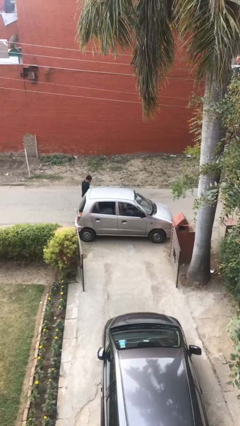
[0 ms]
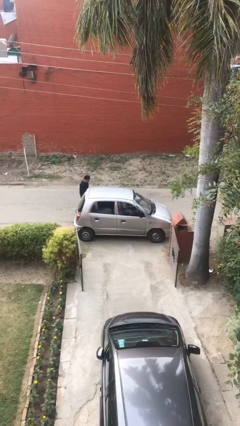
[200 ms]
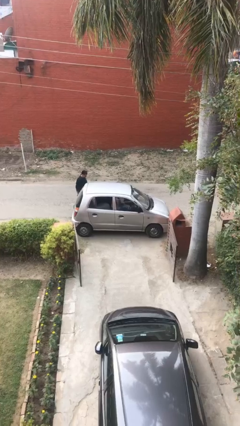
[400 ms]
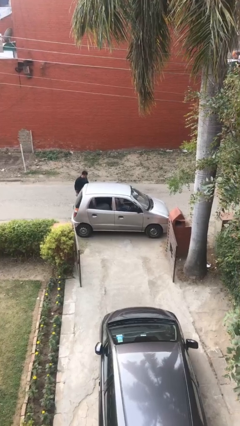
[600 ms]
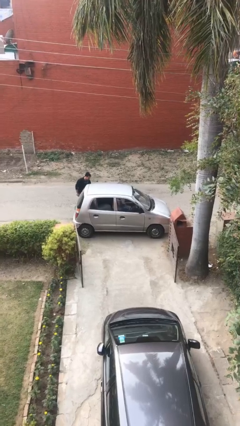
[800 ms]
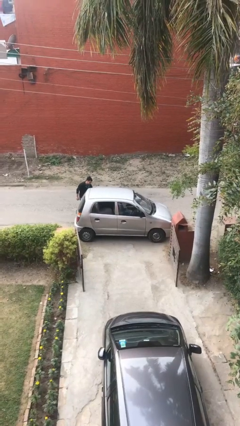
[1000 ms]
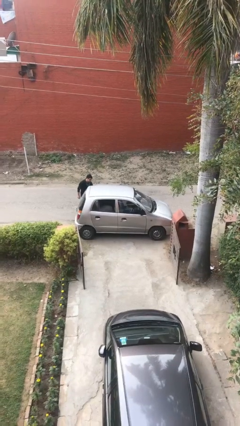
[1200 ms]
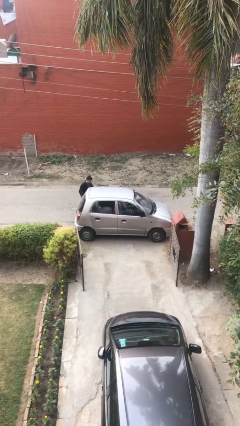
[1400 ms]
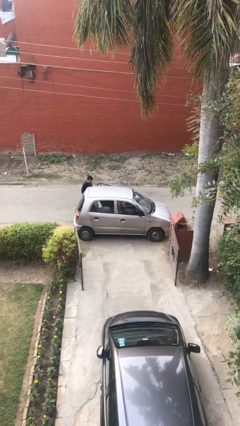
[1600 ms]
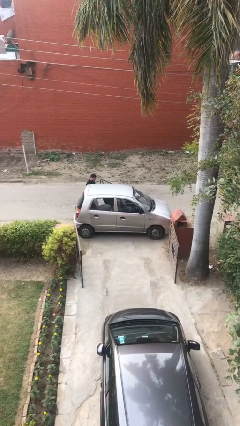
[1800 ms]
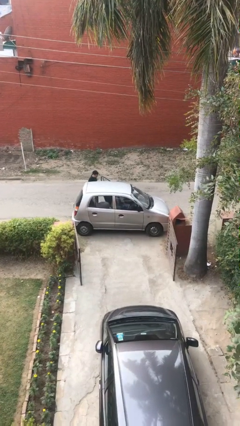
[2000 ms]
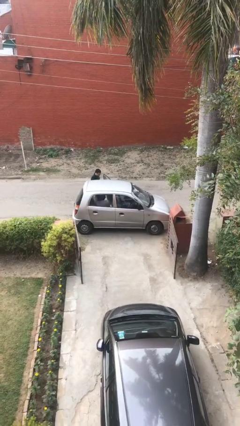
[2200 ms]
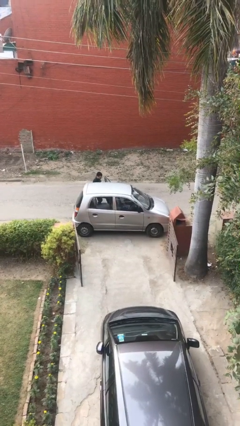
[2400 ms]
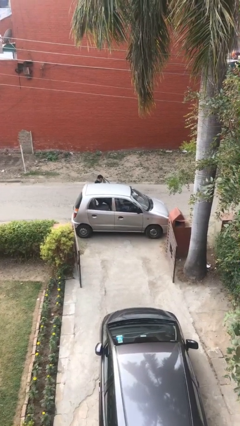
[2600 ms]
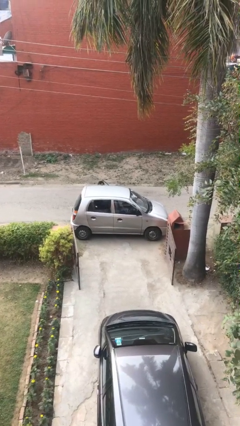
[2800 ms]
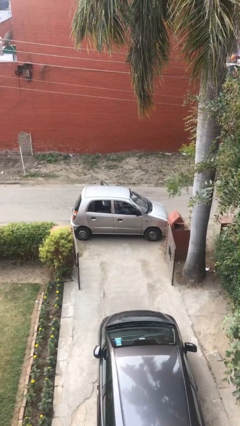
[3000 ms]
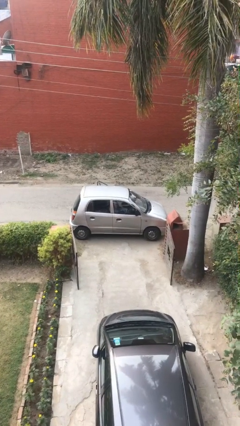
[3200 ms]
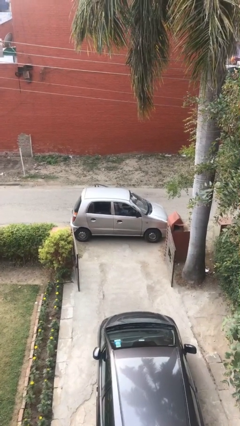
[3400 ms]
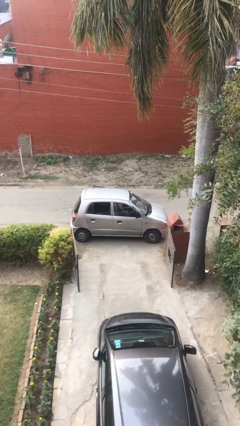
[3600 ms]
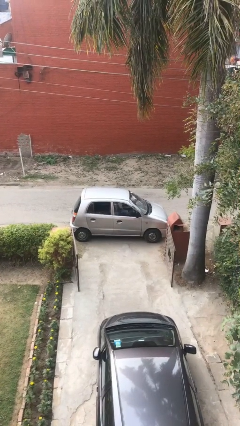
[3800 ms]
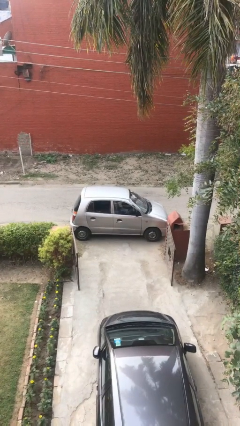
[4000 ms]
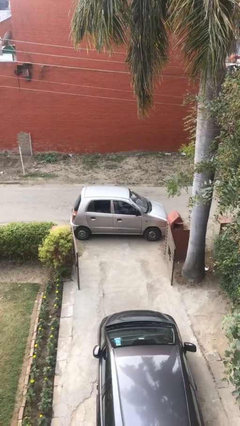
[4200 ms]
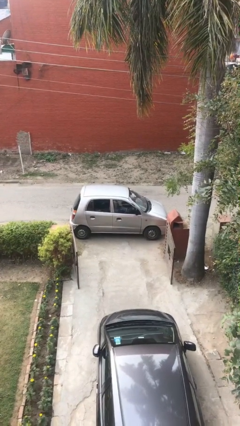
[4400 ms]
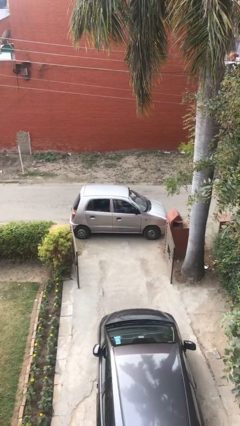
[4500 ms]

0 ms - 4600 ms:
car picks up person

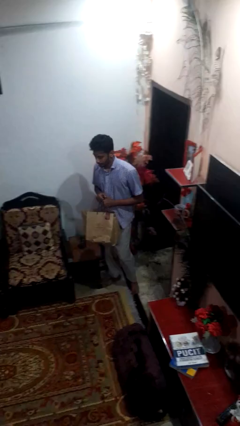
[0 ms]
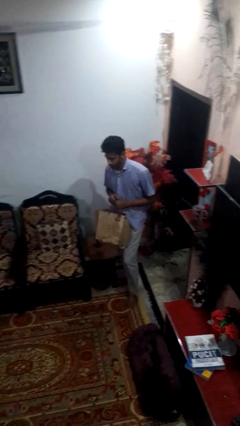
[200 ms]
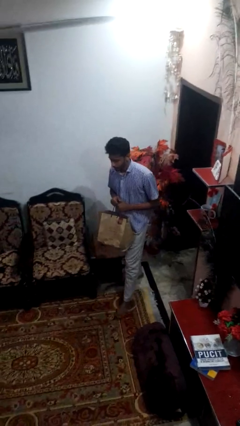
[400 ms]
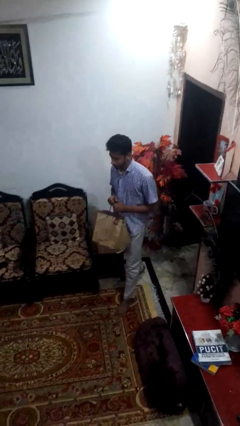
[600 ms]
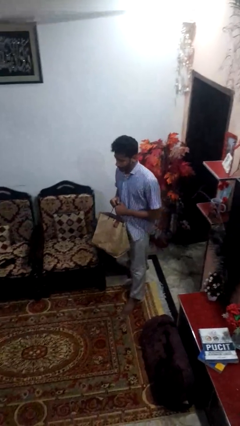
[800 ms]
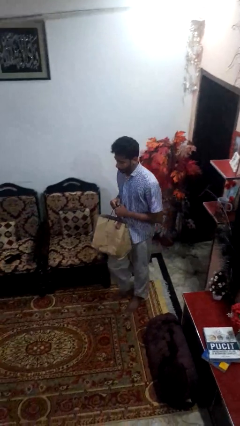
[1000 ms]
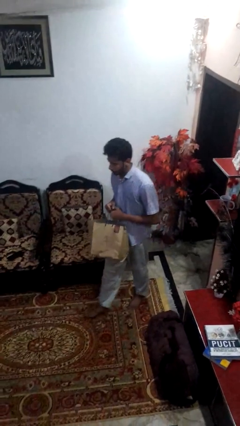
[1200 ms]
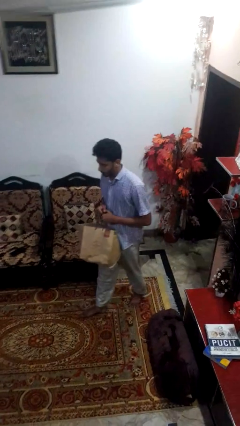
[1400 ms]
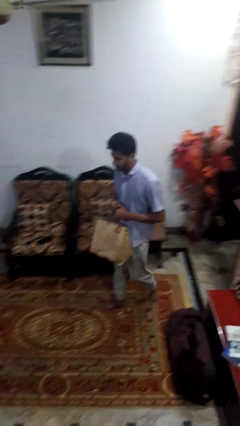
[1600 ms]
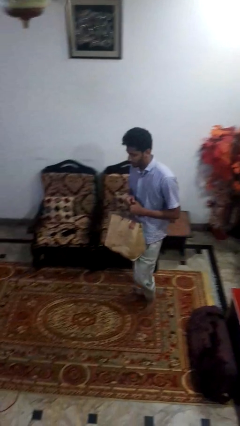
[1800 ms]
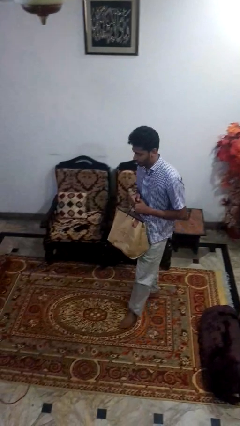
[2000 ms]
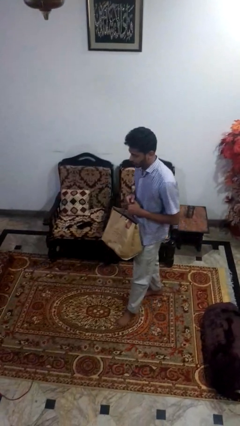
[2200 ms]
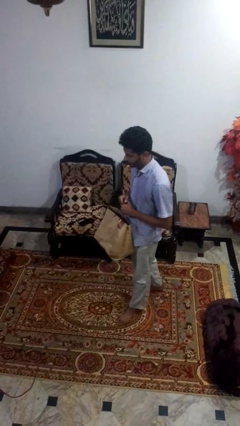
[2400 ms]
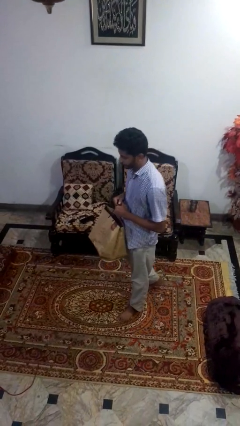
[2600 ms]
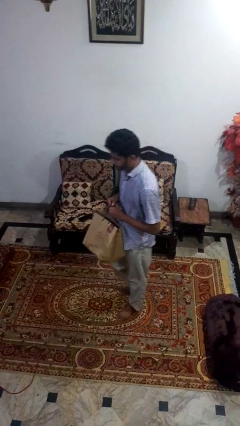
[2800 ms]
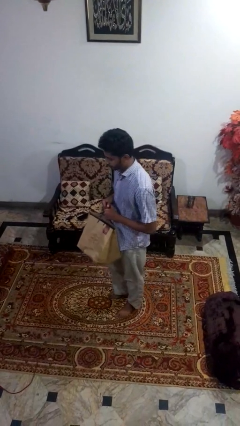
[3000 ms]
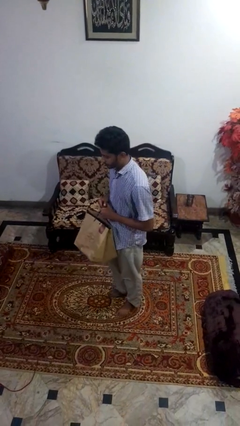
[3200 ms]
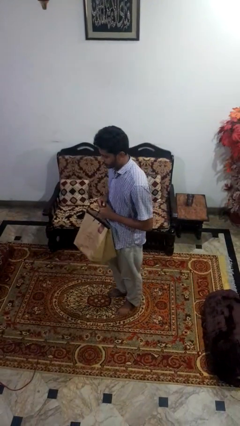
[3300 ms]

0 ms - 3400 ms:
person carries groceries

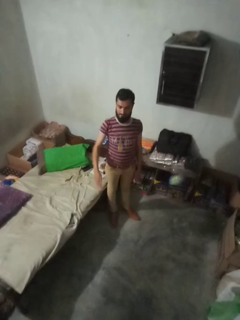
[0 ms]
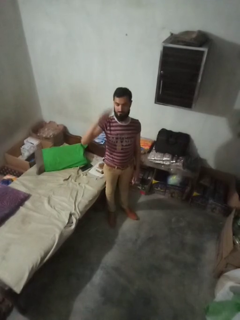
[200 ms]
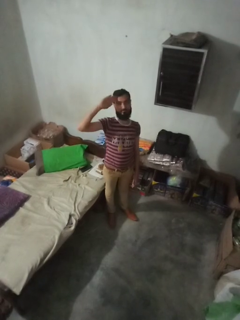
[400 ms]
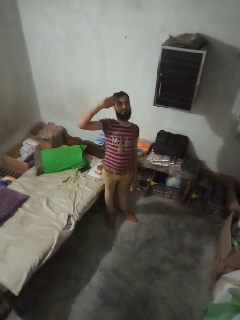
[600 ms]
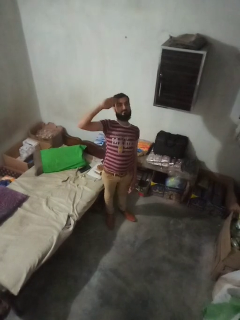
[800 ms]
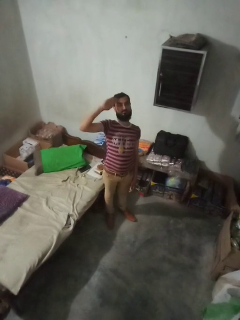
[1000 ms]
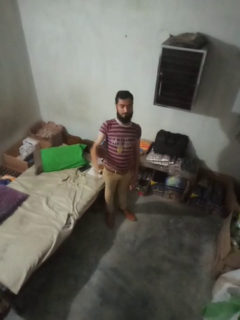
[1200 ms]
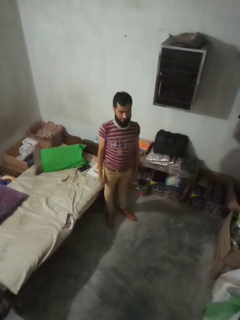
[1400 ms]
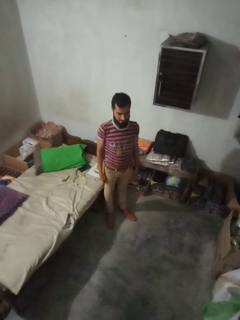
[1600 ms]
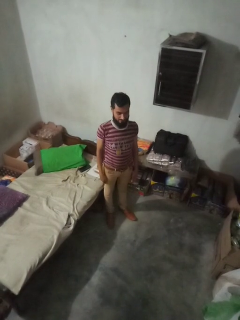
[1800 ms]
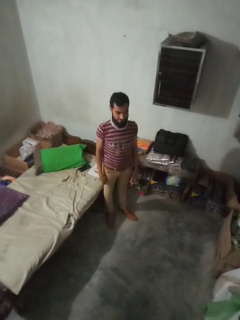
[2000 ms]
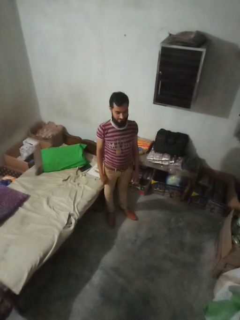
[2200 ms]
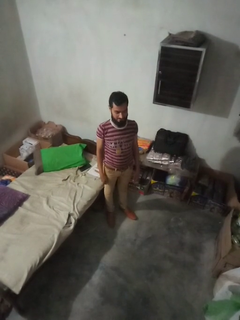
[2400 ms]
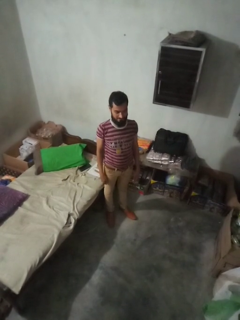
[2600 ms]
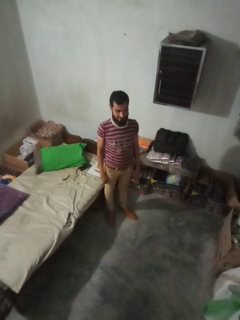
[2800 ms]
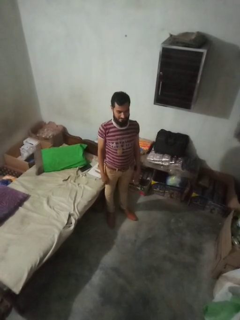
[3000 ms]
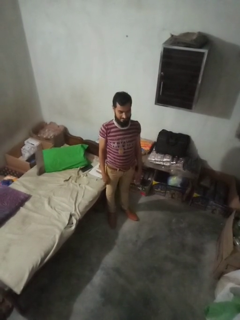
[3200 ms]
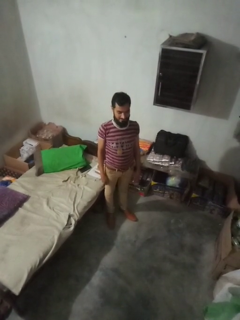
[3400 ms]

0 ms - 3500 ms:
person salutes

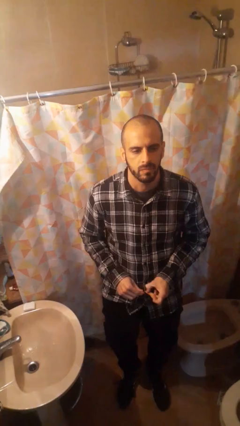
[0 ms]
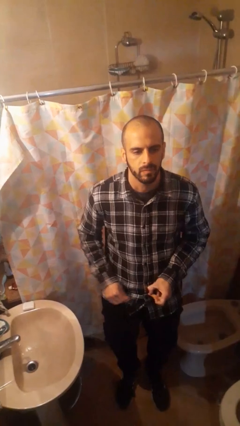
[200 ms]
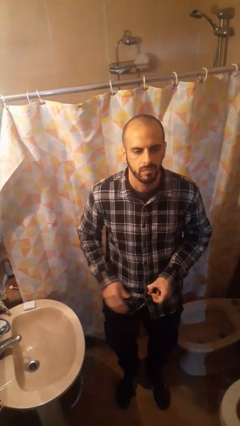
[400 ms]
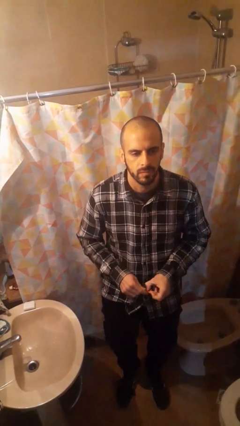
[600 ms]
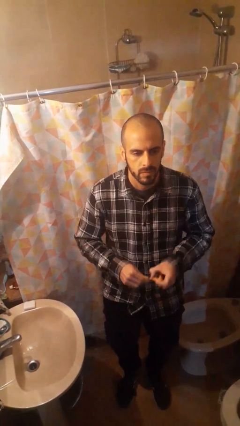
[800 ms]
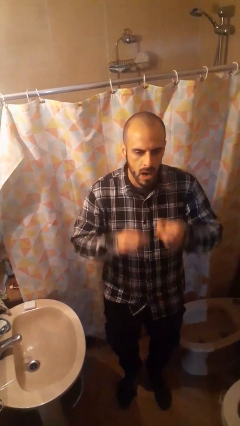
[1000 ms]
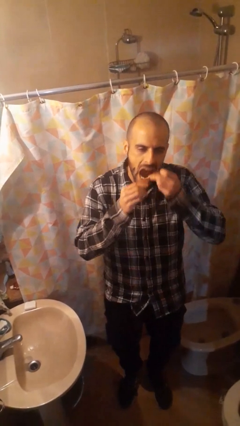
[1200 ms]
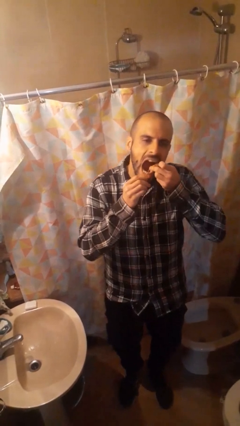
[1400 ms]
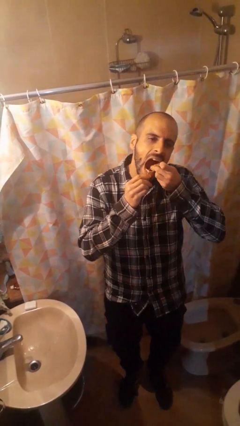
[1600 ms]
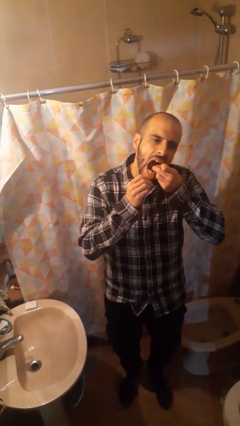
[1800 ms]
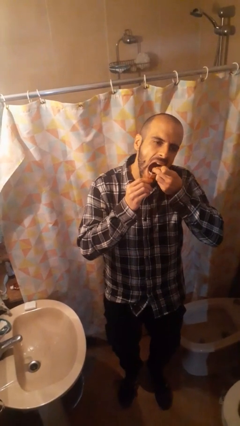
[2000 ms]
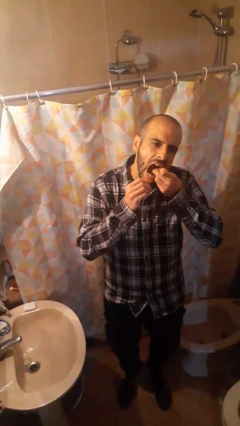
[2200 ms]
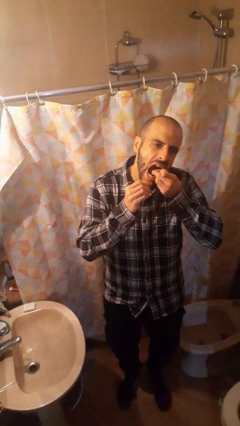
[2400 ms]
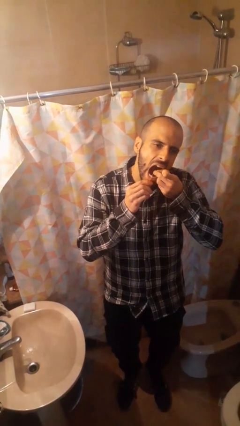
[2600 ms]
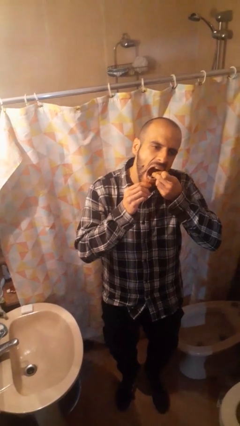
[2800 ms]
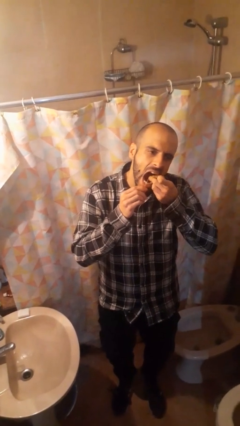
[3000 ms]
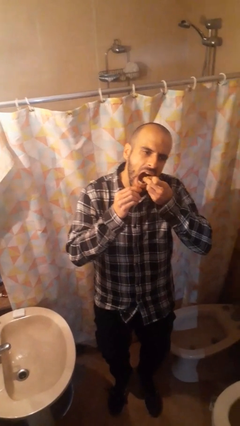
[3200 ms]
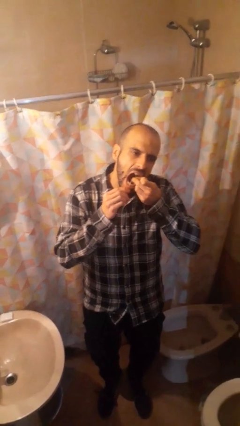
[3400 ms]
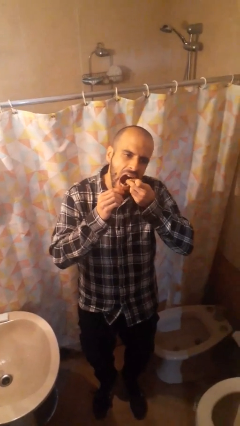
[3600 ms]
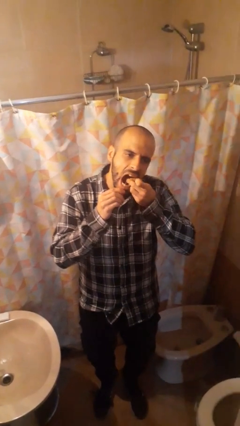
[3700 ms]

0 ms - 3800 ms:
person flosses

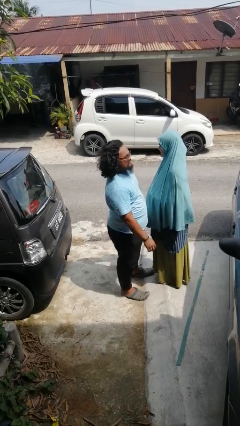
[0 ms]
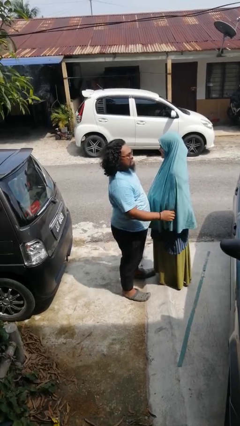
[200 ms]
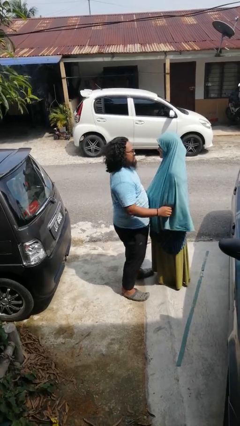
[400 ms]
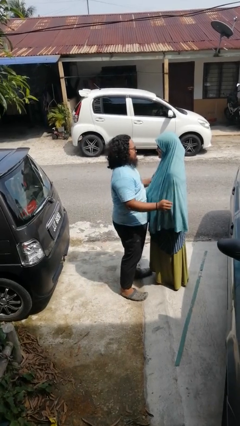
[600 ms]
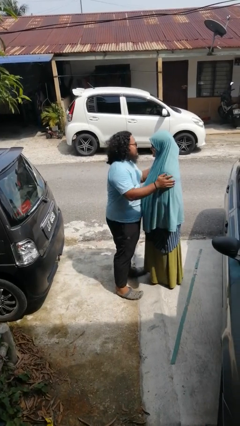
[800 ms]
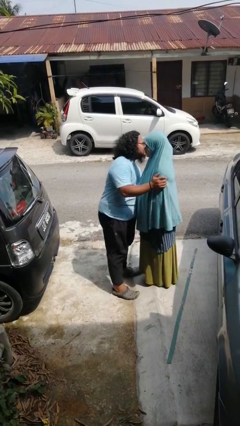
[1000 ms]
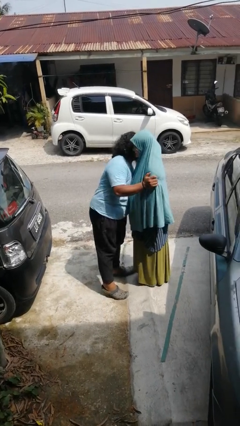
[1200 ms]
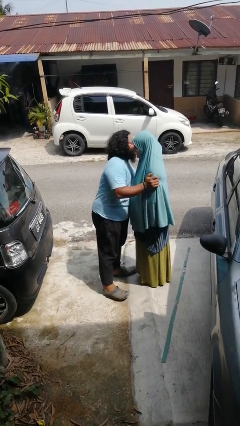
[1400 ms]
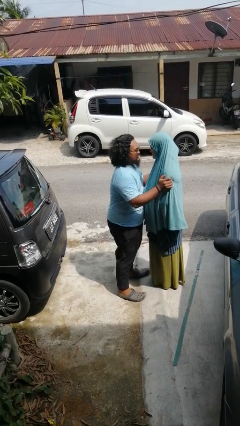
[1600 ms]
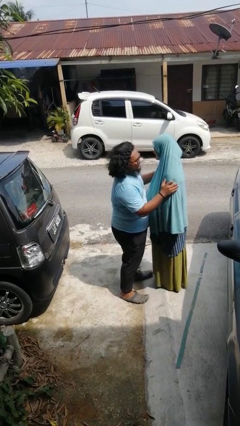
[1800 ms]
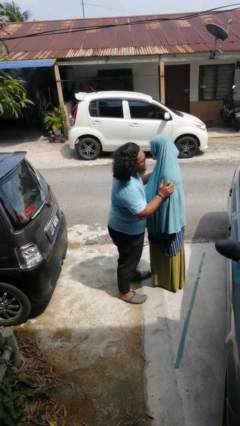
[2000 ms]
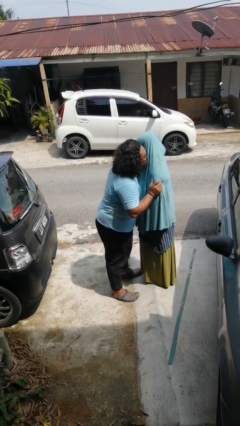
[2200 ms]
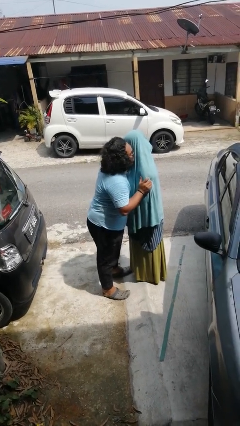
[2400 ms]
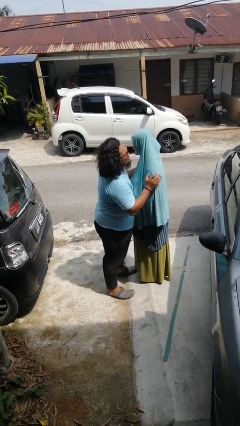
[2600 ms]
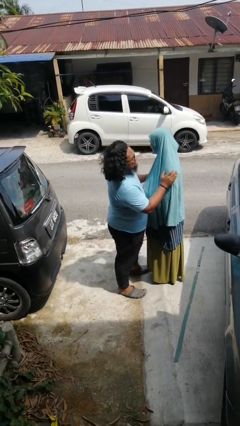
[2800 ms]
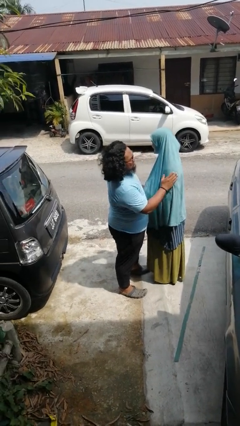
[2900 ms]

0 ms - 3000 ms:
person kisses cheek of person
